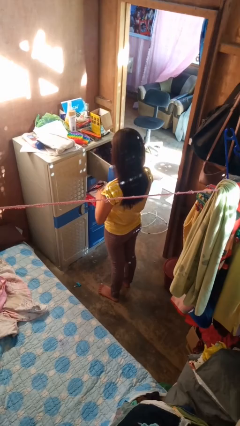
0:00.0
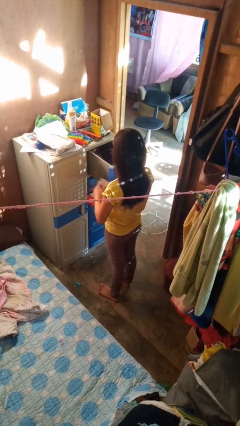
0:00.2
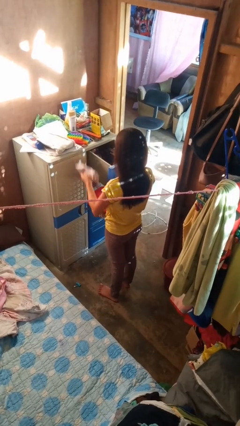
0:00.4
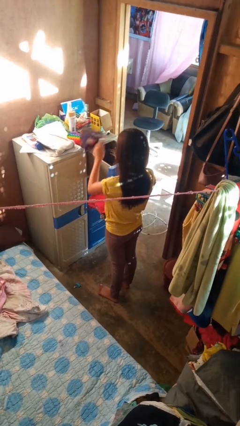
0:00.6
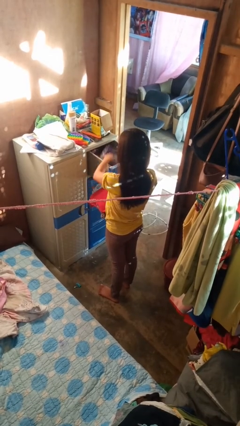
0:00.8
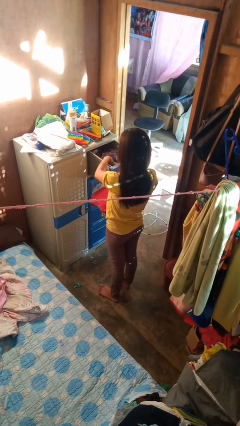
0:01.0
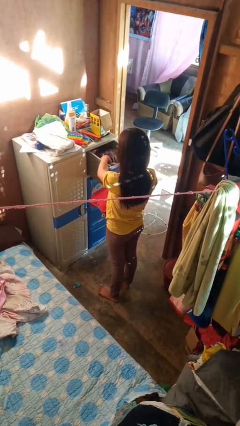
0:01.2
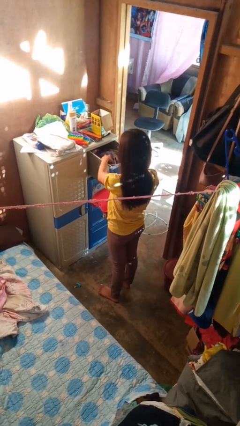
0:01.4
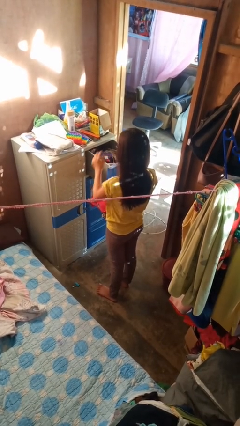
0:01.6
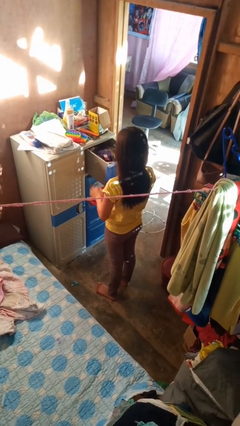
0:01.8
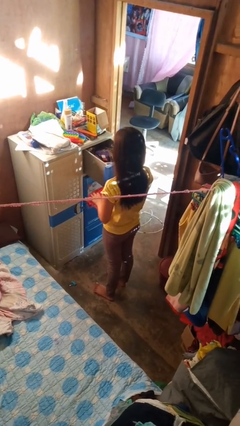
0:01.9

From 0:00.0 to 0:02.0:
person puts clothes into dresser

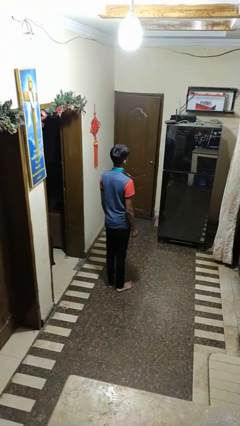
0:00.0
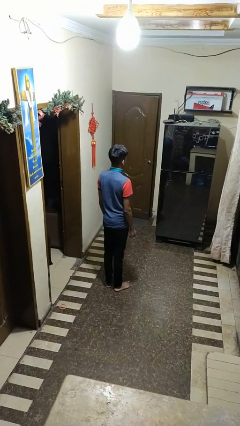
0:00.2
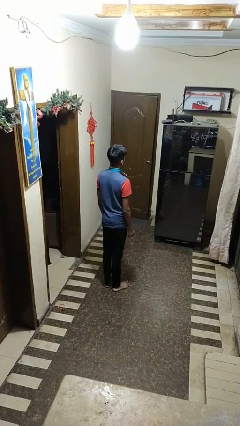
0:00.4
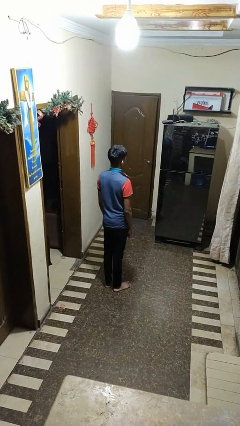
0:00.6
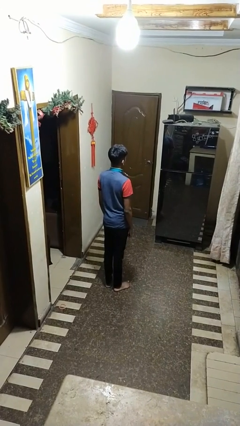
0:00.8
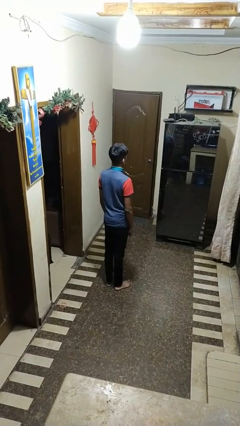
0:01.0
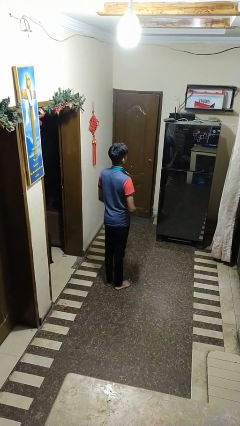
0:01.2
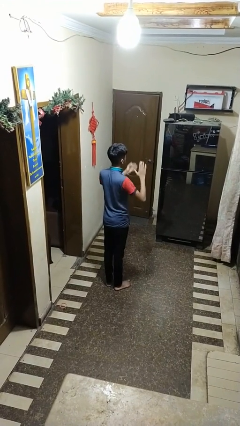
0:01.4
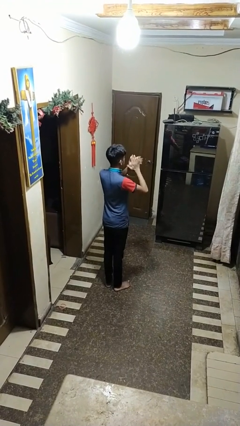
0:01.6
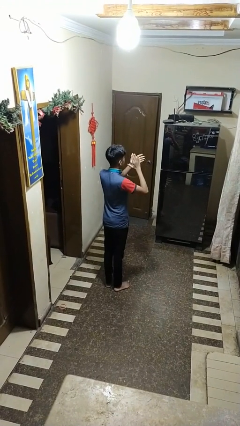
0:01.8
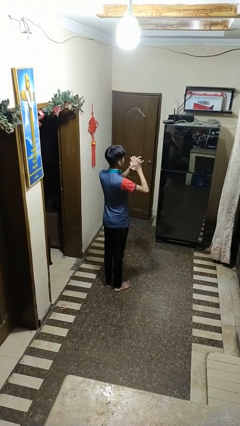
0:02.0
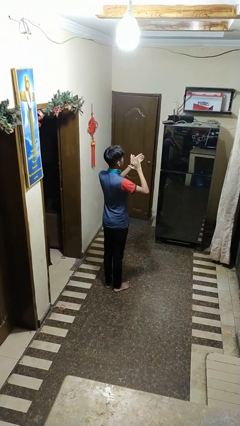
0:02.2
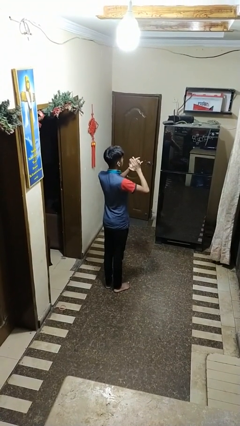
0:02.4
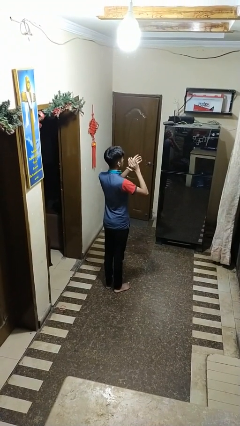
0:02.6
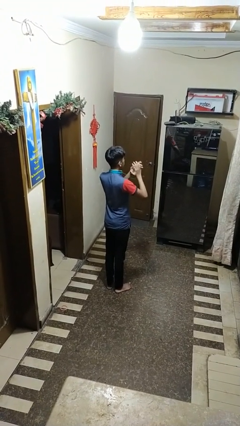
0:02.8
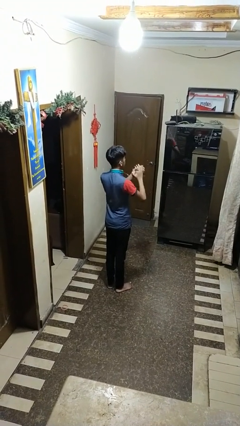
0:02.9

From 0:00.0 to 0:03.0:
person claps hands

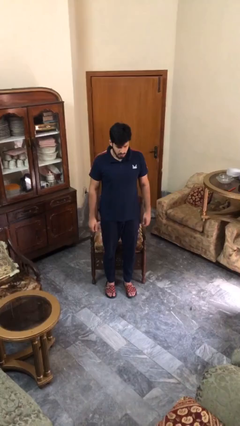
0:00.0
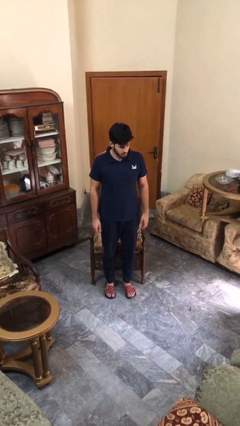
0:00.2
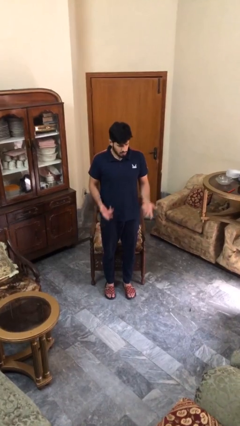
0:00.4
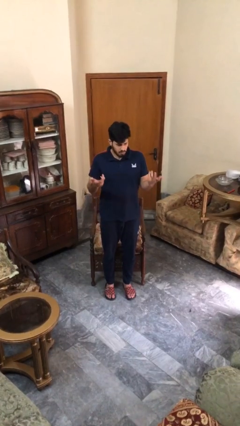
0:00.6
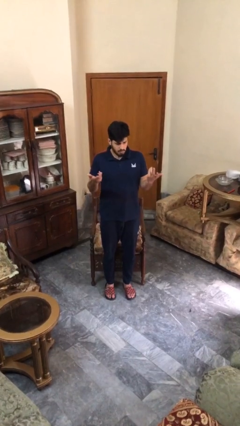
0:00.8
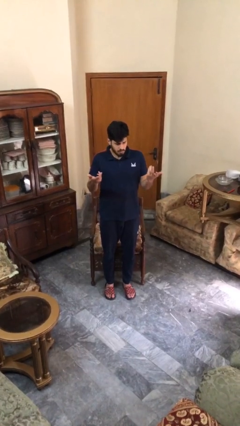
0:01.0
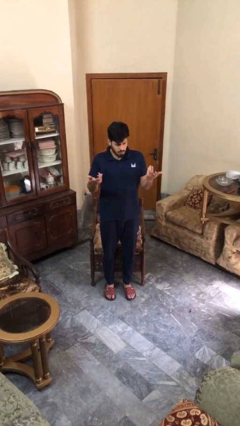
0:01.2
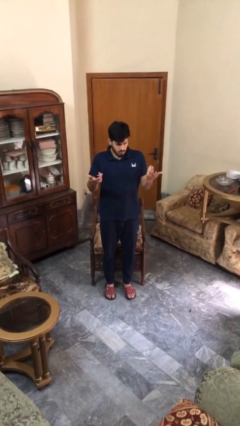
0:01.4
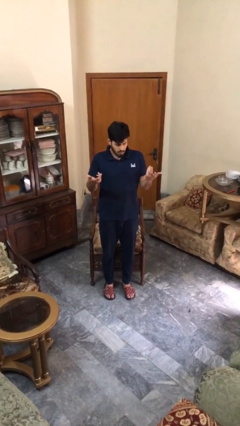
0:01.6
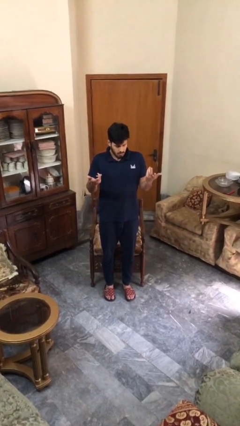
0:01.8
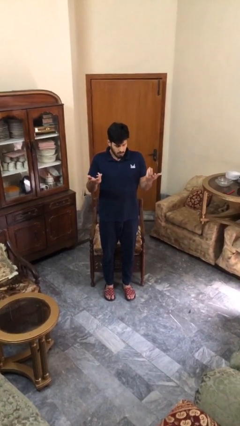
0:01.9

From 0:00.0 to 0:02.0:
person shrugs

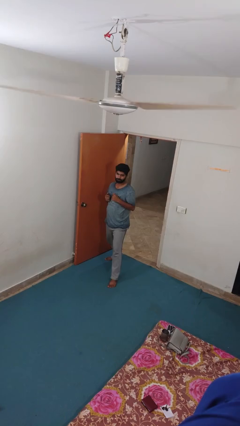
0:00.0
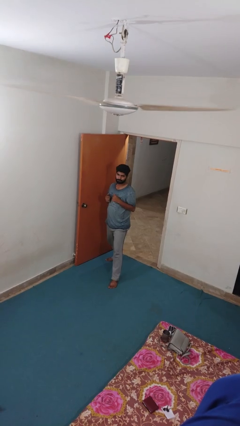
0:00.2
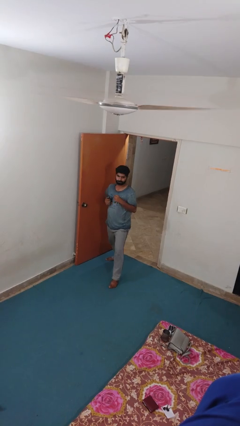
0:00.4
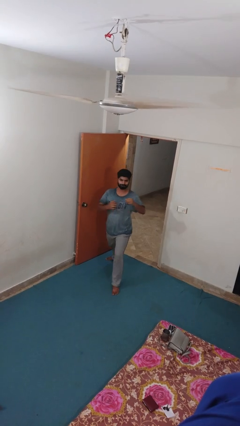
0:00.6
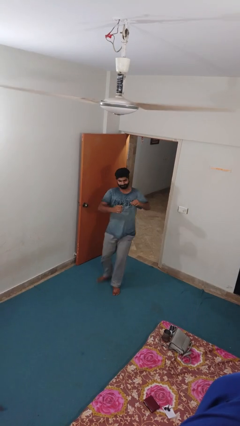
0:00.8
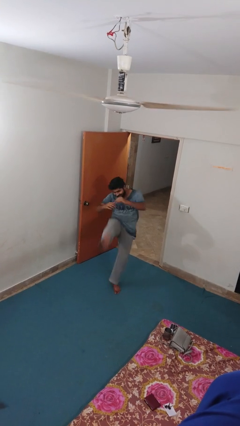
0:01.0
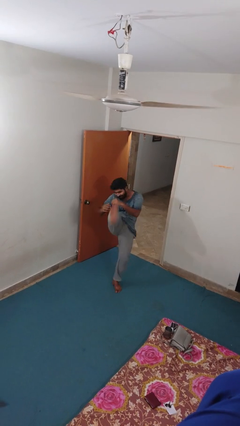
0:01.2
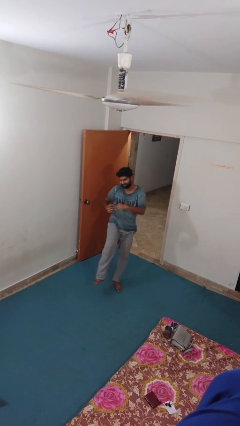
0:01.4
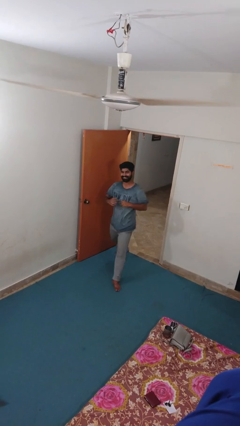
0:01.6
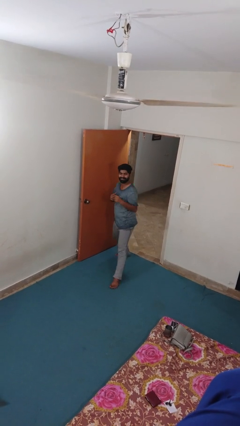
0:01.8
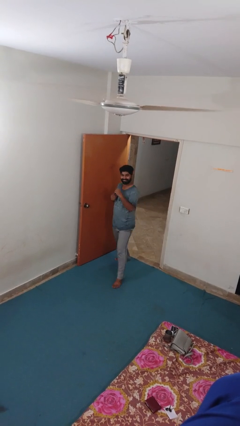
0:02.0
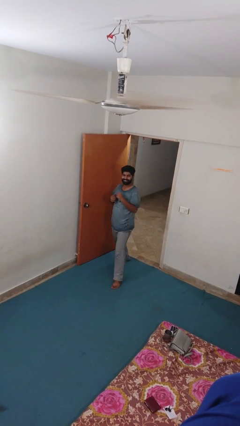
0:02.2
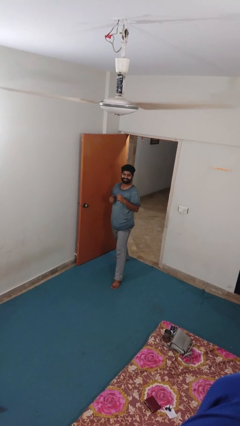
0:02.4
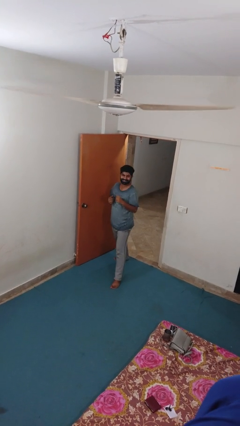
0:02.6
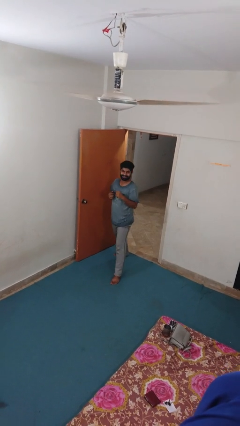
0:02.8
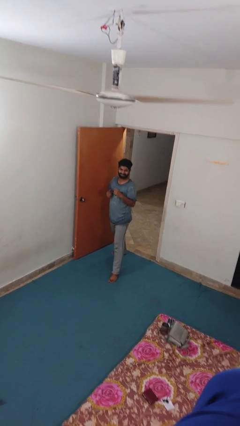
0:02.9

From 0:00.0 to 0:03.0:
person karate kicks

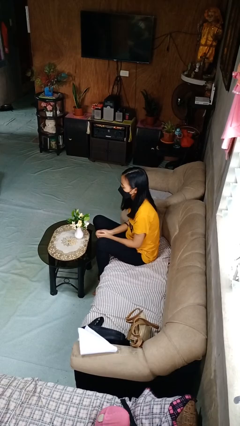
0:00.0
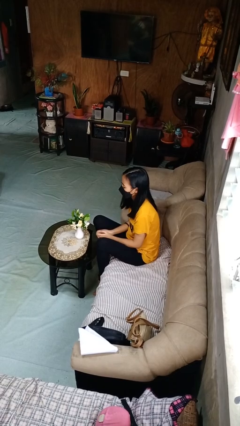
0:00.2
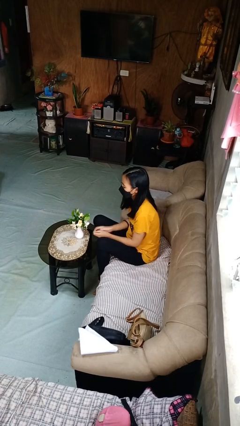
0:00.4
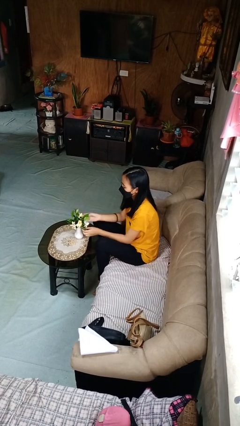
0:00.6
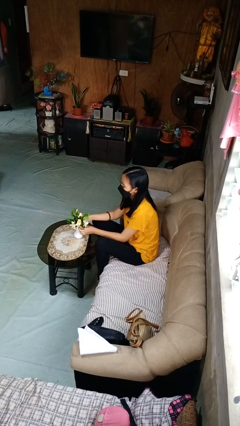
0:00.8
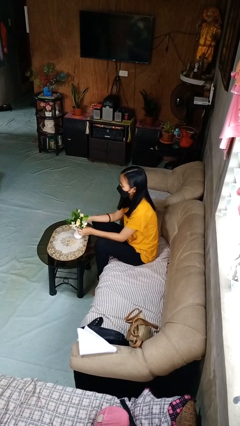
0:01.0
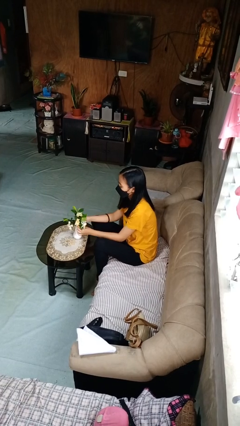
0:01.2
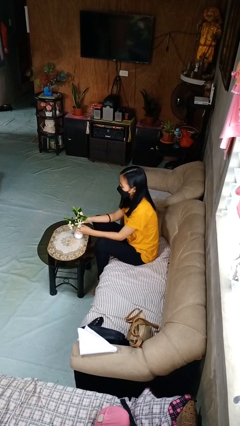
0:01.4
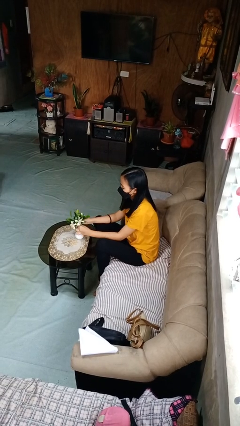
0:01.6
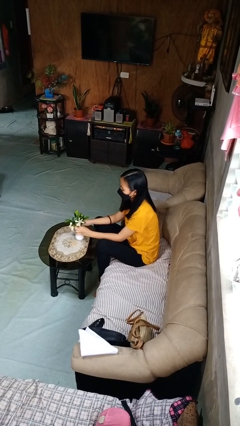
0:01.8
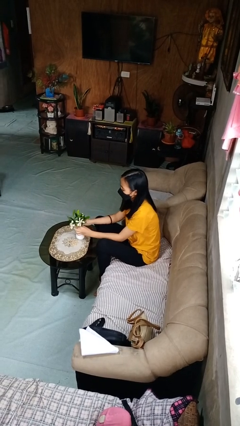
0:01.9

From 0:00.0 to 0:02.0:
person arranges flowers in vase

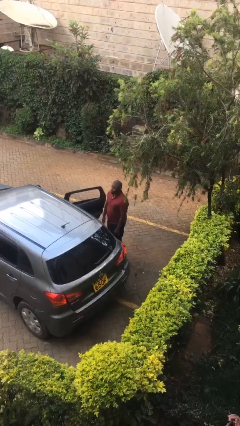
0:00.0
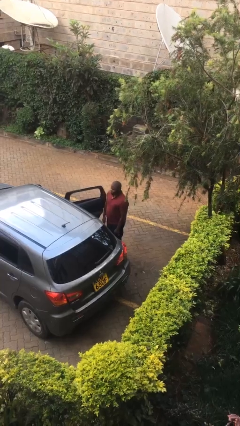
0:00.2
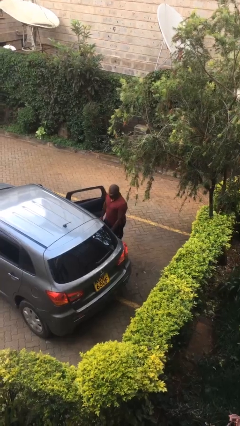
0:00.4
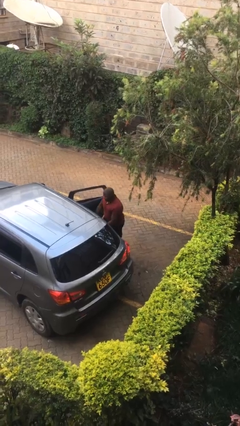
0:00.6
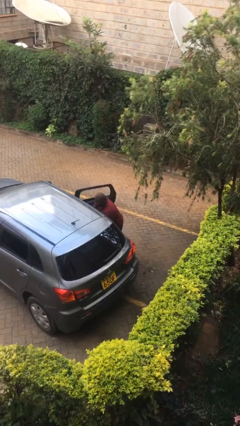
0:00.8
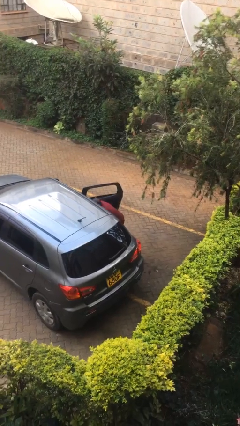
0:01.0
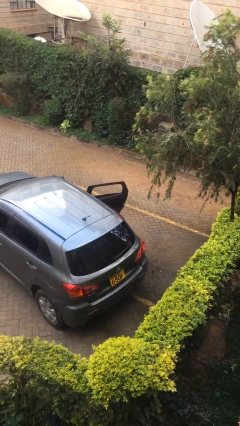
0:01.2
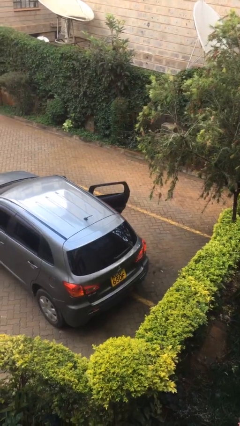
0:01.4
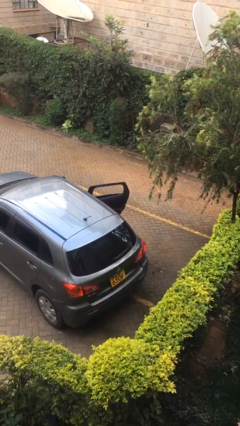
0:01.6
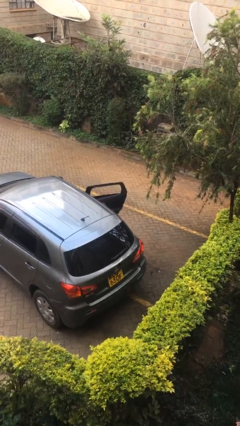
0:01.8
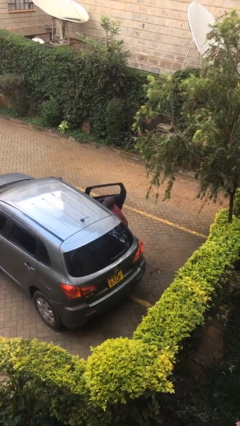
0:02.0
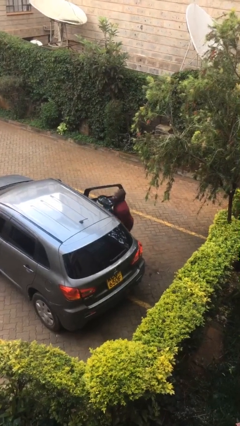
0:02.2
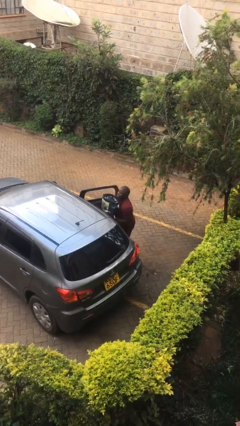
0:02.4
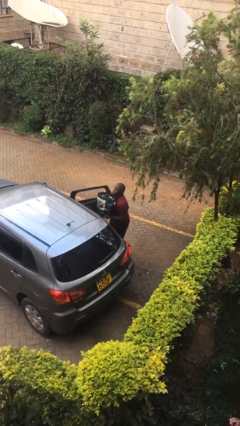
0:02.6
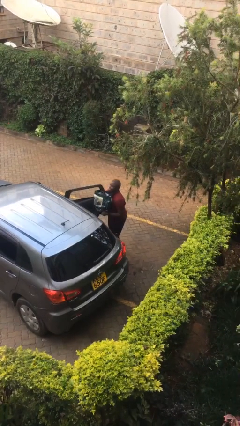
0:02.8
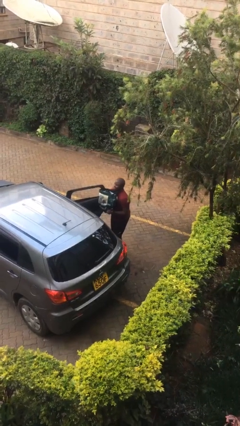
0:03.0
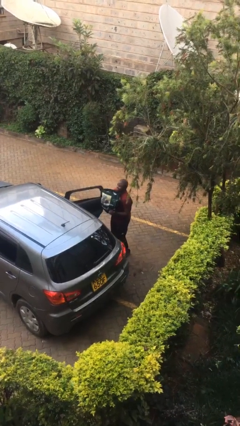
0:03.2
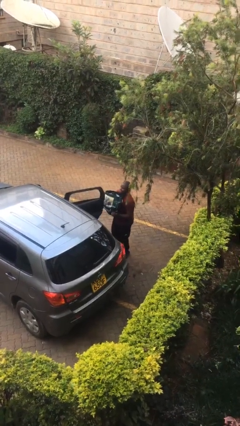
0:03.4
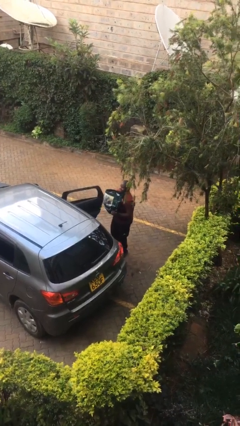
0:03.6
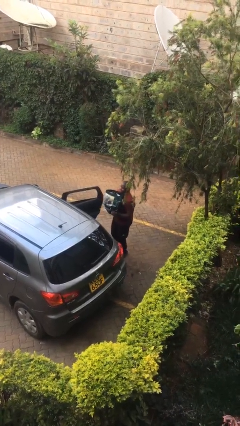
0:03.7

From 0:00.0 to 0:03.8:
person unloads car

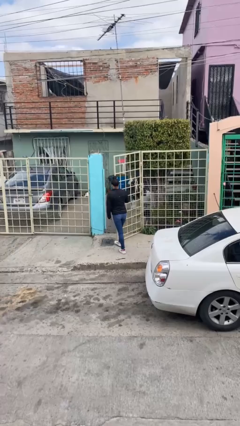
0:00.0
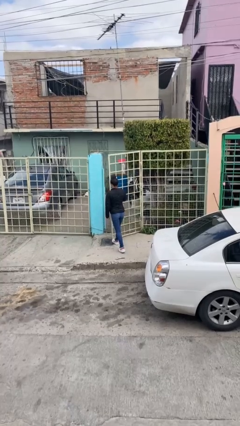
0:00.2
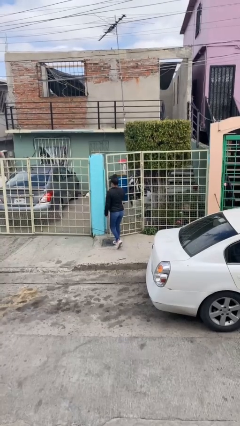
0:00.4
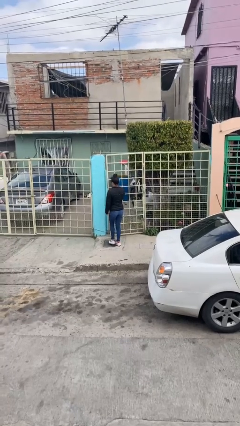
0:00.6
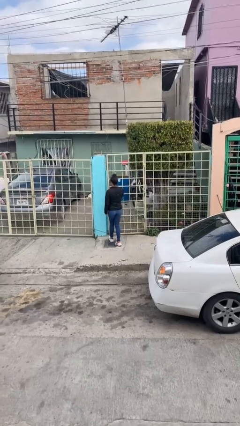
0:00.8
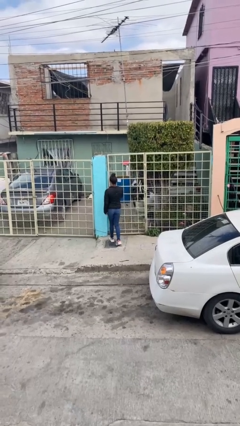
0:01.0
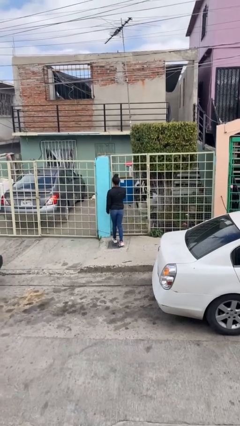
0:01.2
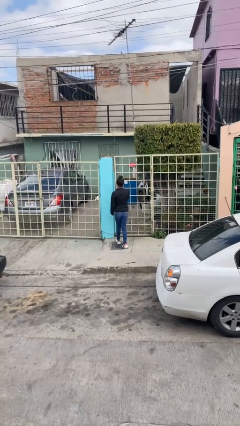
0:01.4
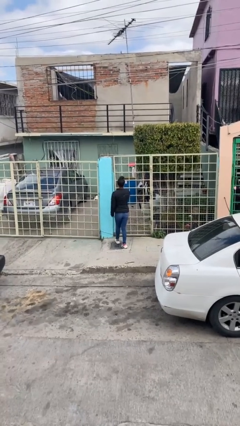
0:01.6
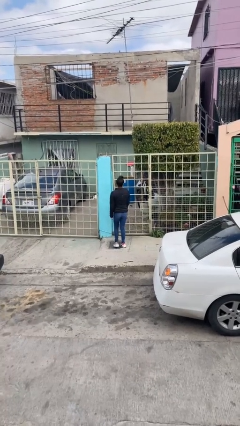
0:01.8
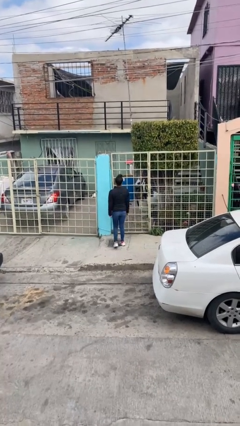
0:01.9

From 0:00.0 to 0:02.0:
person closes facility door
